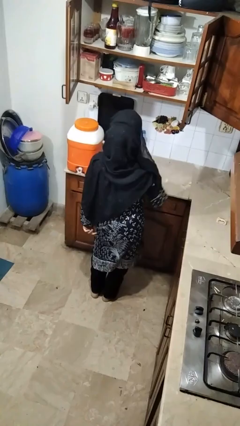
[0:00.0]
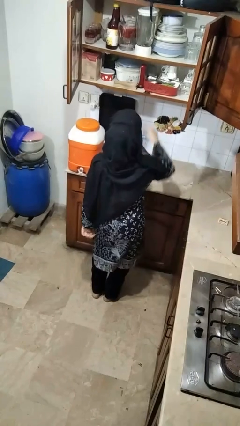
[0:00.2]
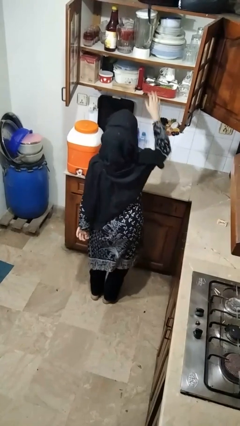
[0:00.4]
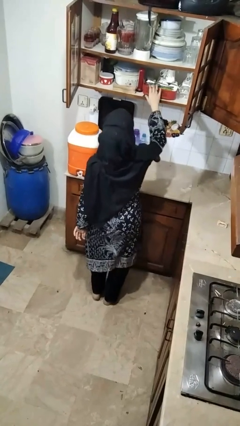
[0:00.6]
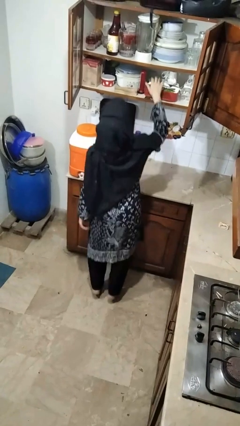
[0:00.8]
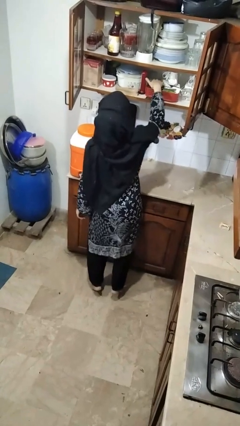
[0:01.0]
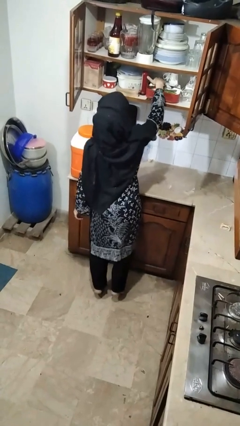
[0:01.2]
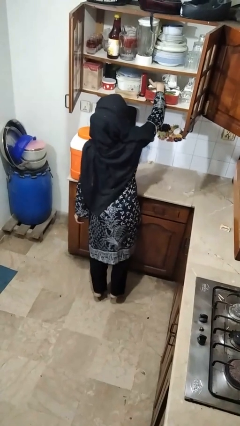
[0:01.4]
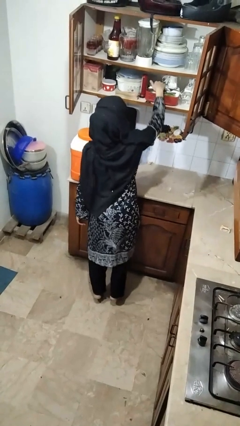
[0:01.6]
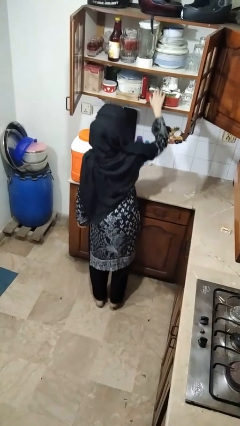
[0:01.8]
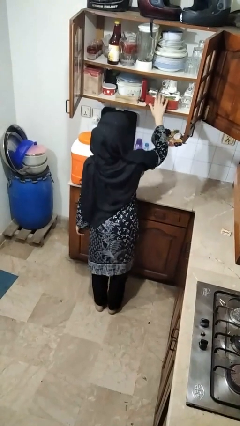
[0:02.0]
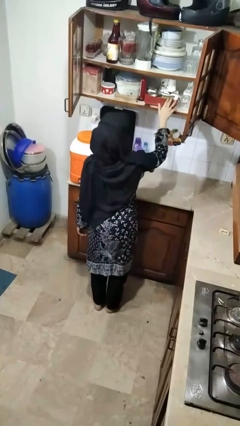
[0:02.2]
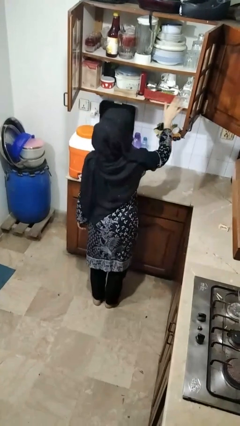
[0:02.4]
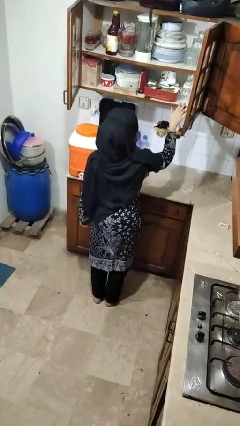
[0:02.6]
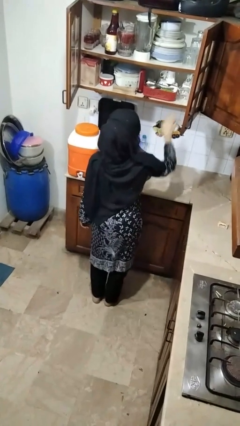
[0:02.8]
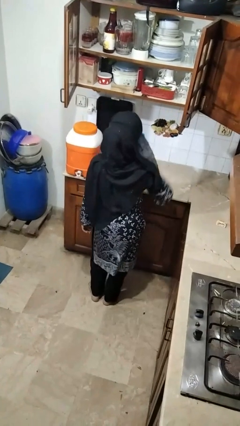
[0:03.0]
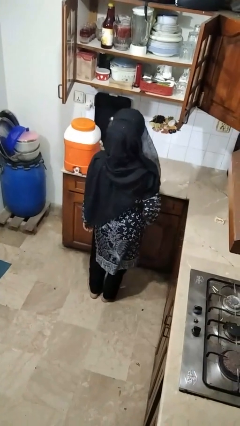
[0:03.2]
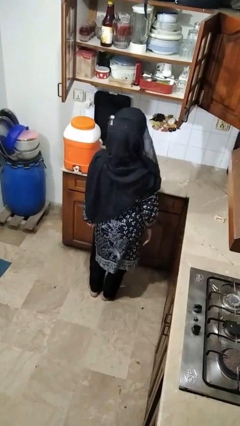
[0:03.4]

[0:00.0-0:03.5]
person searches in cabinet

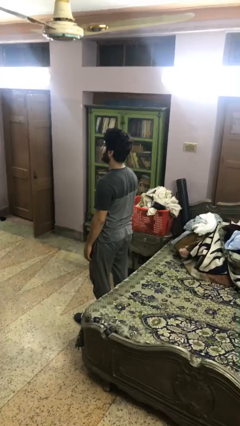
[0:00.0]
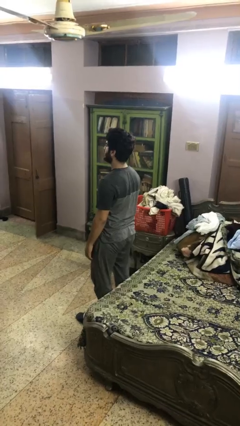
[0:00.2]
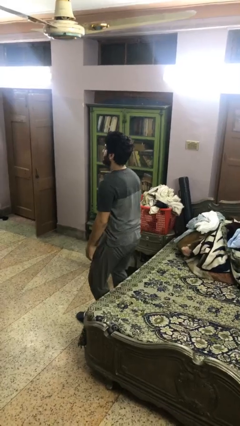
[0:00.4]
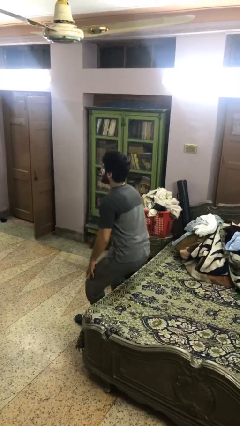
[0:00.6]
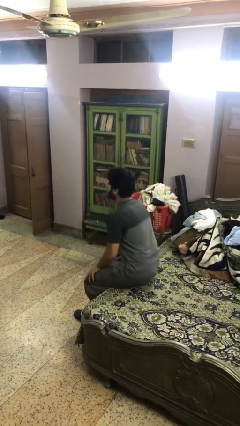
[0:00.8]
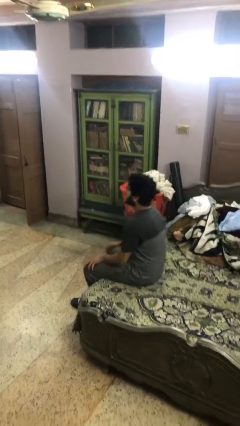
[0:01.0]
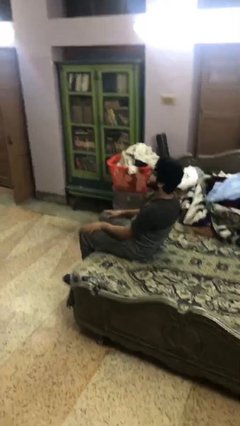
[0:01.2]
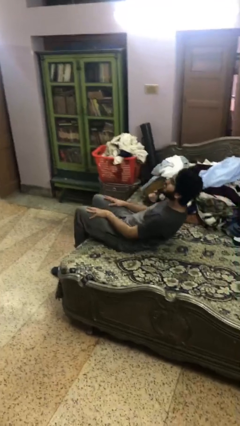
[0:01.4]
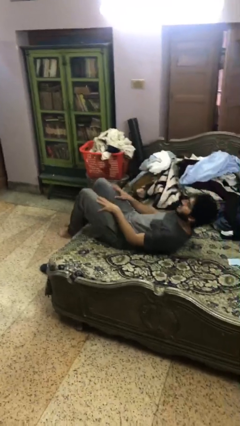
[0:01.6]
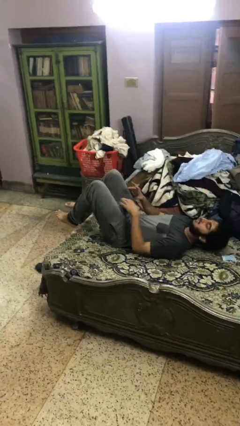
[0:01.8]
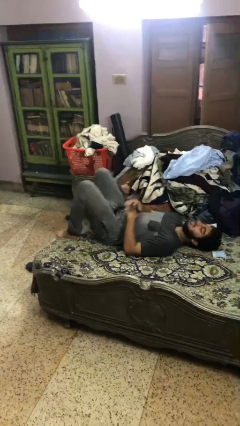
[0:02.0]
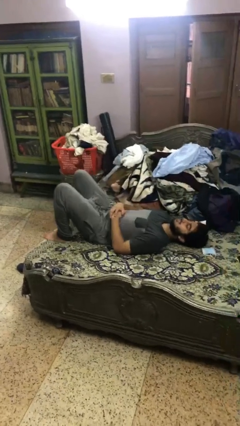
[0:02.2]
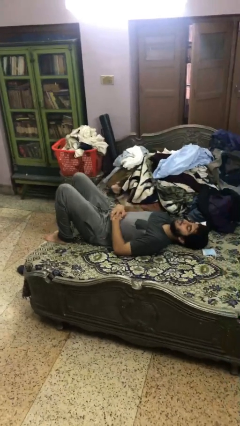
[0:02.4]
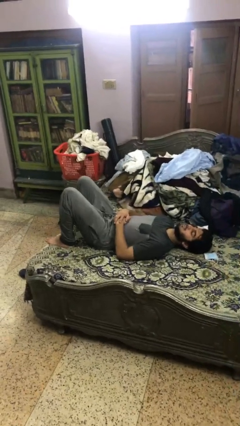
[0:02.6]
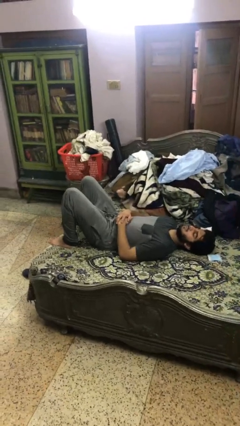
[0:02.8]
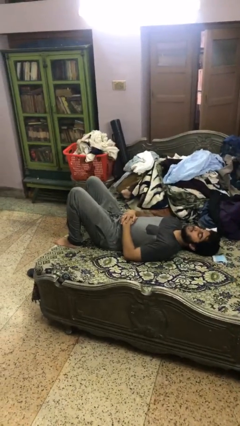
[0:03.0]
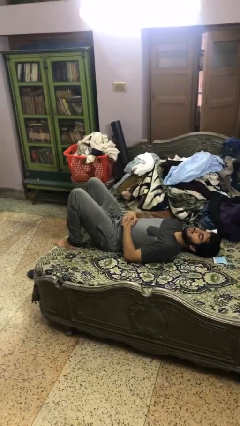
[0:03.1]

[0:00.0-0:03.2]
person lies down on bed

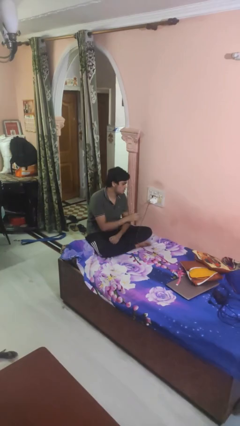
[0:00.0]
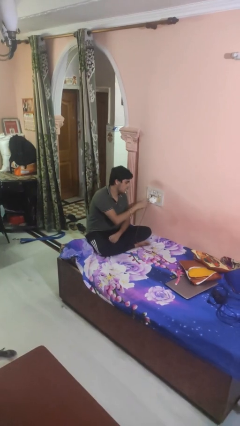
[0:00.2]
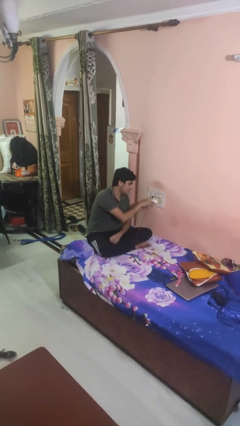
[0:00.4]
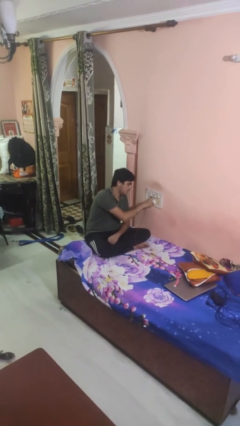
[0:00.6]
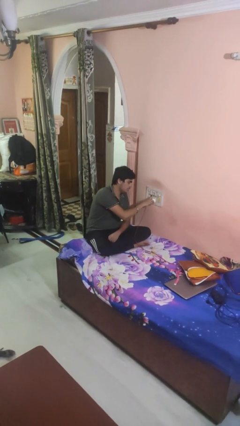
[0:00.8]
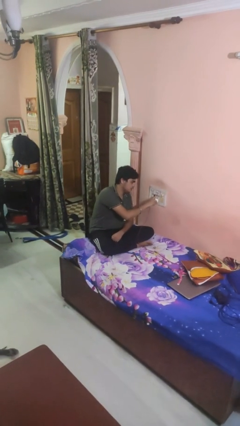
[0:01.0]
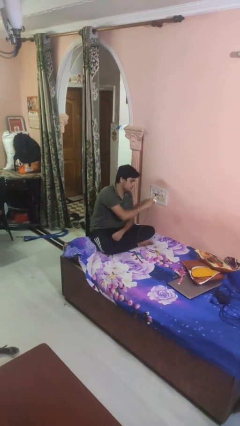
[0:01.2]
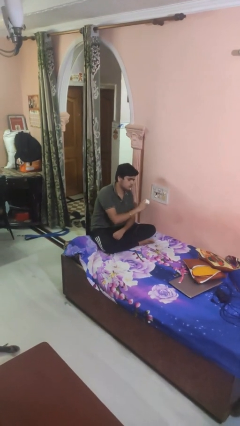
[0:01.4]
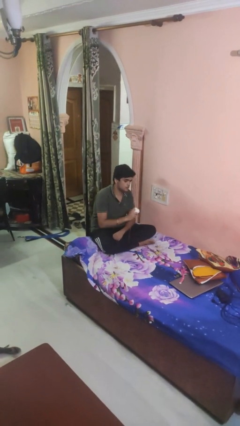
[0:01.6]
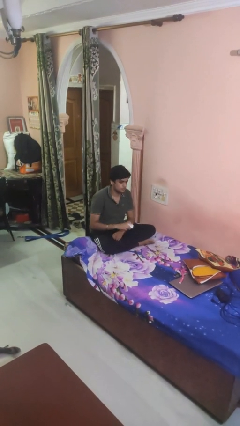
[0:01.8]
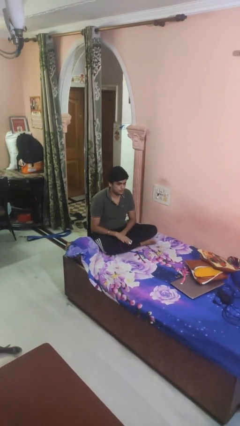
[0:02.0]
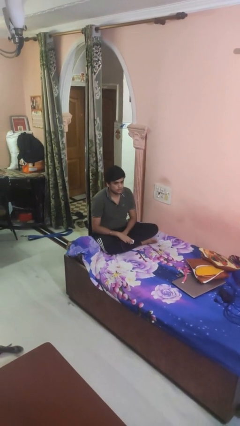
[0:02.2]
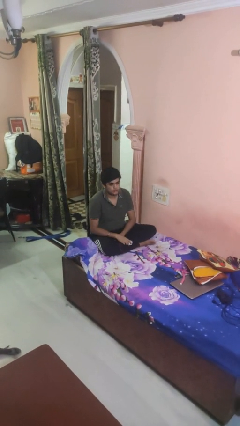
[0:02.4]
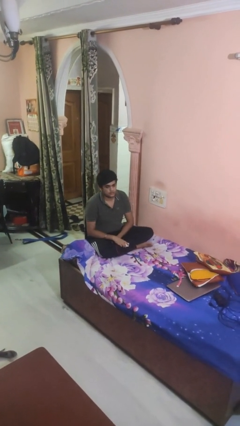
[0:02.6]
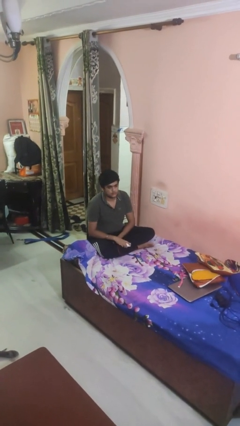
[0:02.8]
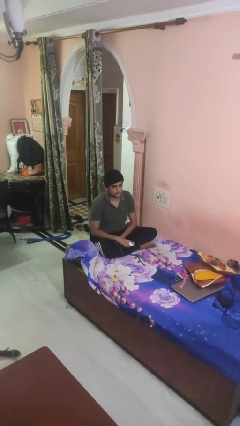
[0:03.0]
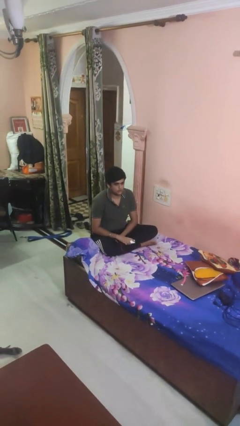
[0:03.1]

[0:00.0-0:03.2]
person unplugs from electrical socket

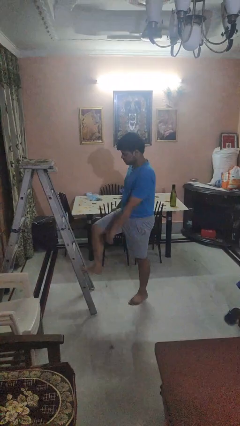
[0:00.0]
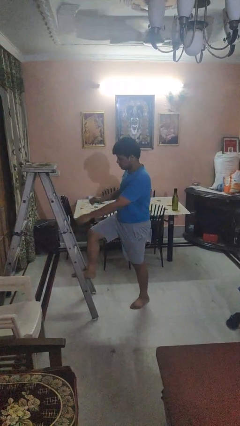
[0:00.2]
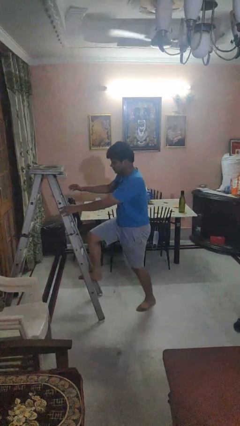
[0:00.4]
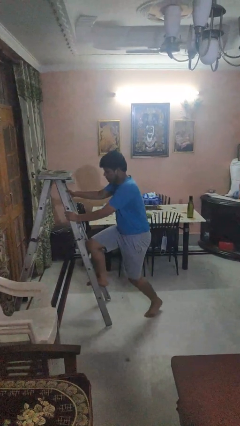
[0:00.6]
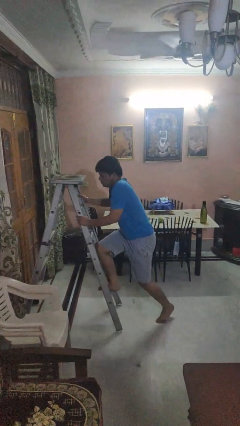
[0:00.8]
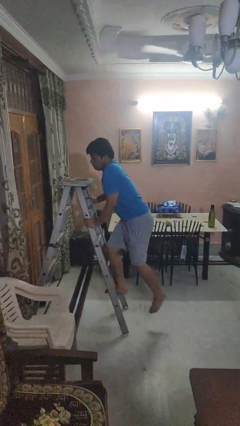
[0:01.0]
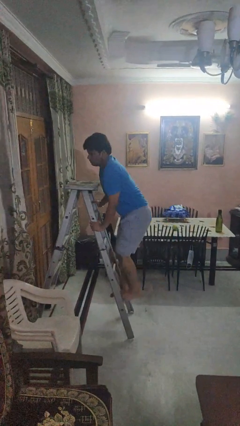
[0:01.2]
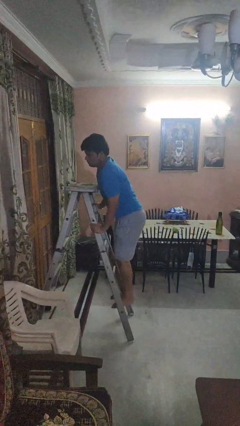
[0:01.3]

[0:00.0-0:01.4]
person climbs up ladder

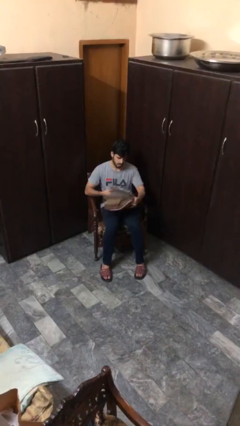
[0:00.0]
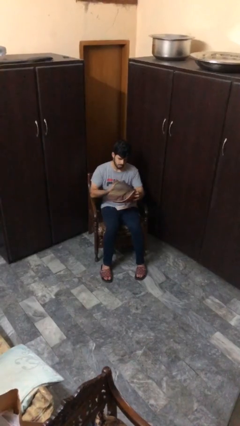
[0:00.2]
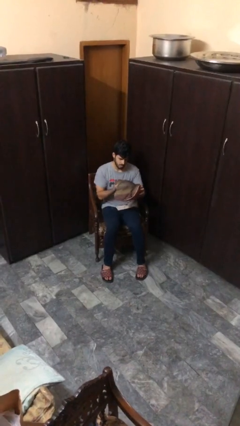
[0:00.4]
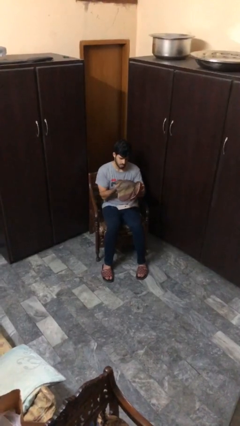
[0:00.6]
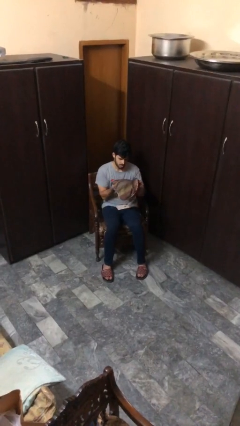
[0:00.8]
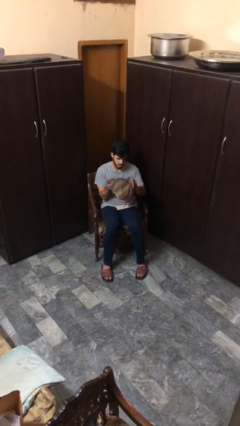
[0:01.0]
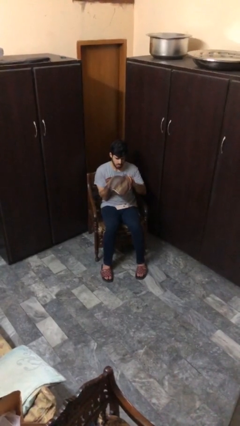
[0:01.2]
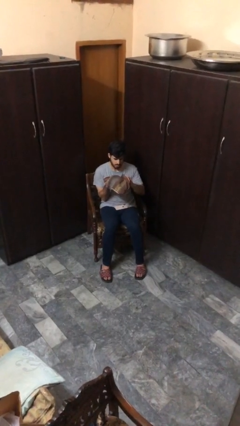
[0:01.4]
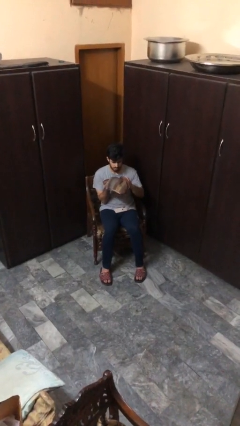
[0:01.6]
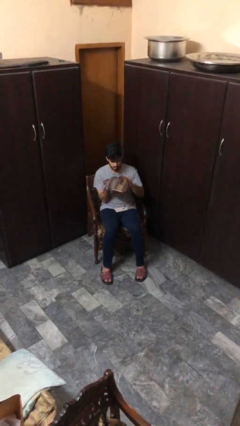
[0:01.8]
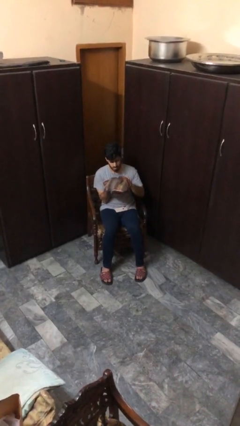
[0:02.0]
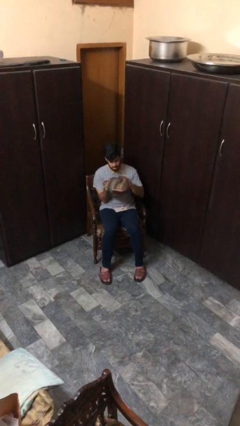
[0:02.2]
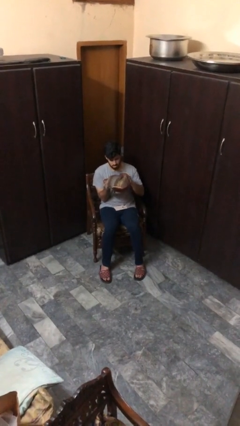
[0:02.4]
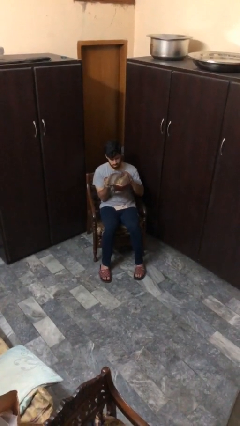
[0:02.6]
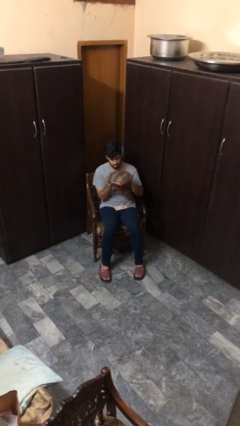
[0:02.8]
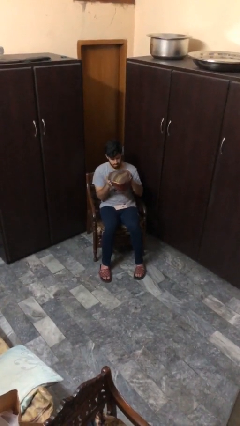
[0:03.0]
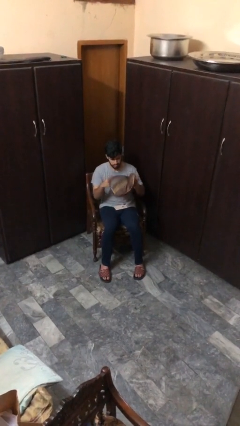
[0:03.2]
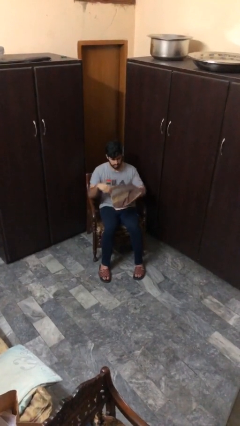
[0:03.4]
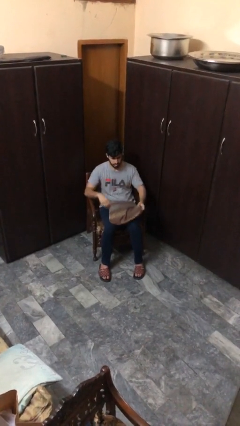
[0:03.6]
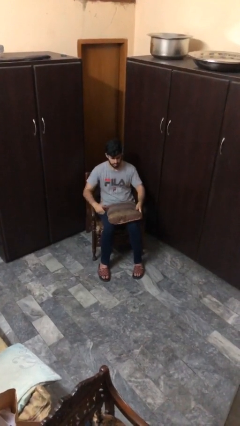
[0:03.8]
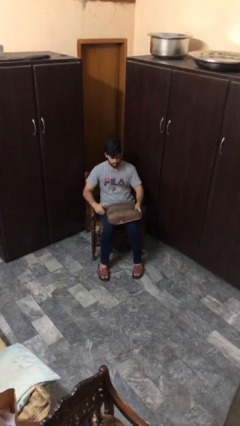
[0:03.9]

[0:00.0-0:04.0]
person squeezes object

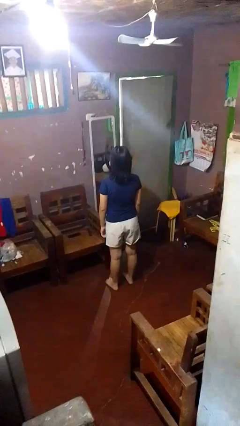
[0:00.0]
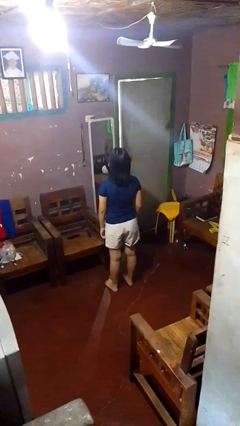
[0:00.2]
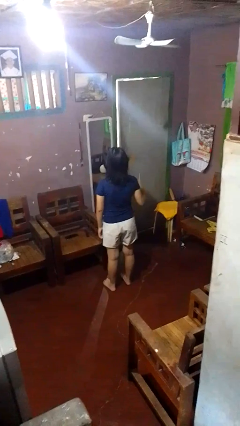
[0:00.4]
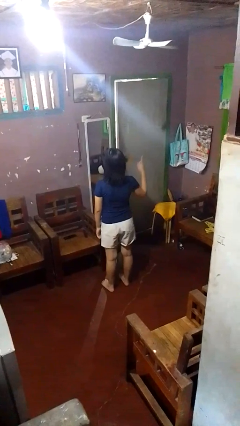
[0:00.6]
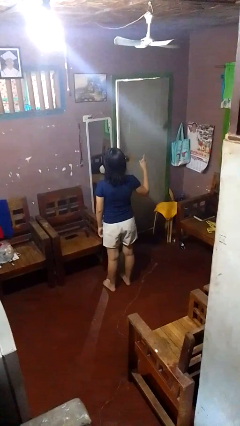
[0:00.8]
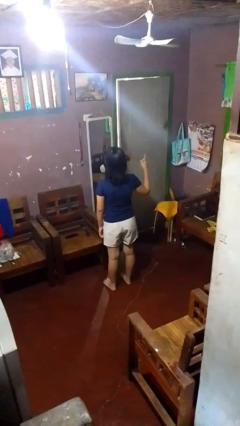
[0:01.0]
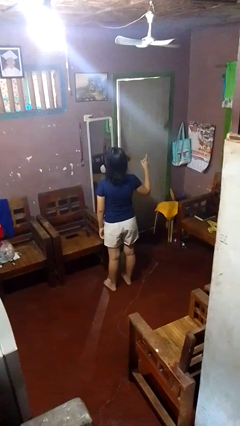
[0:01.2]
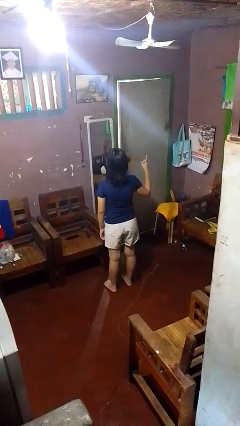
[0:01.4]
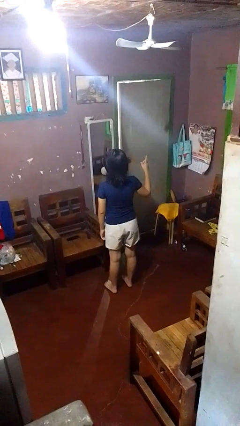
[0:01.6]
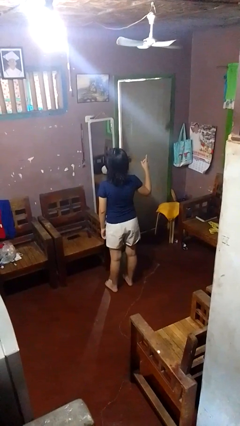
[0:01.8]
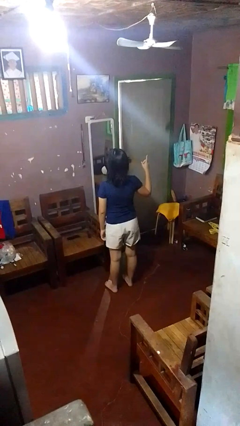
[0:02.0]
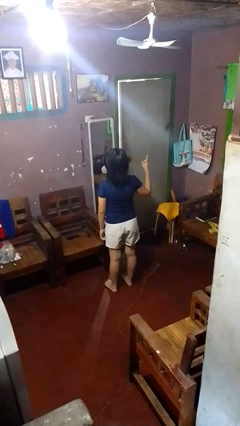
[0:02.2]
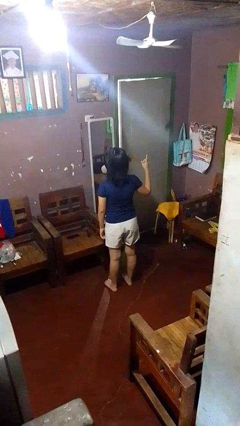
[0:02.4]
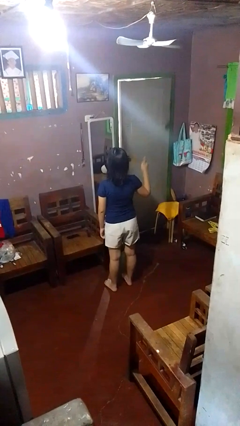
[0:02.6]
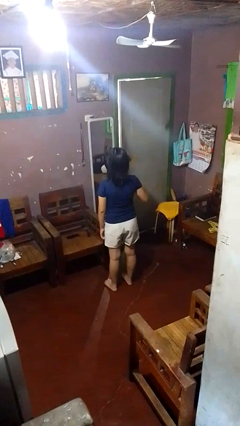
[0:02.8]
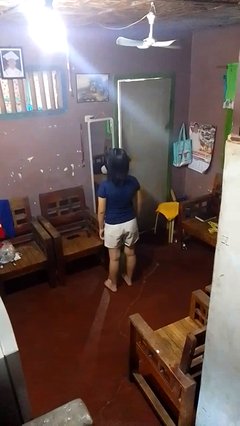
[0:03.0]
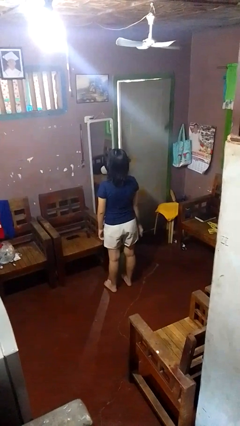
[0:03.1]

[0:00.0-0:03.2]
person gestures number one
